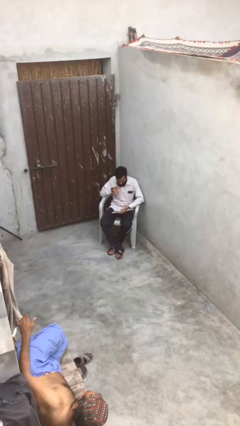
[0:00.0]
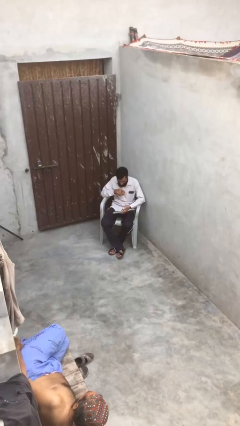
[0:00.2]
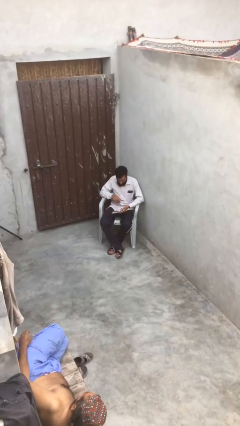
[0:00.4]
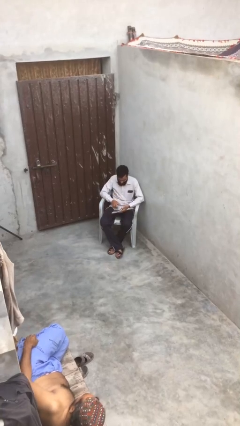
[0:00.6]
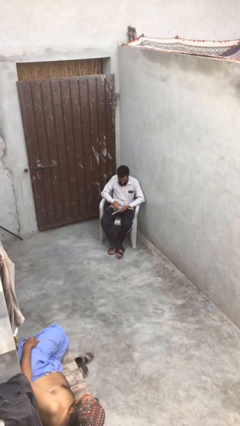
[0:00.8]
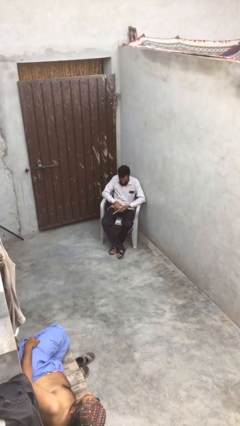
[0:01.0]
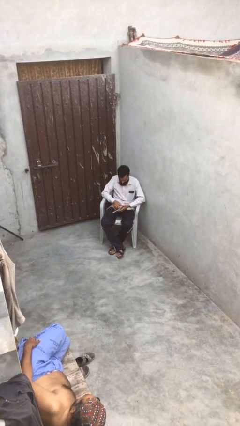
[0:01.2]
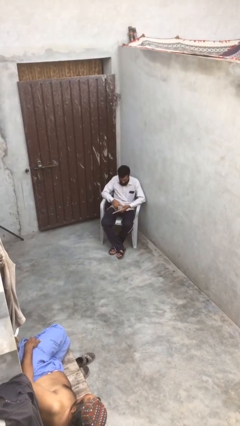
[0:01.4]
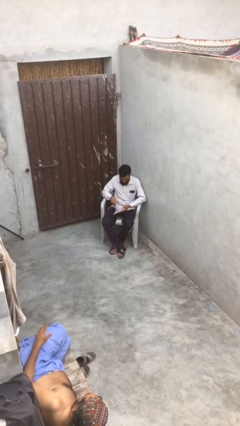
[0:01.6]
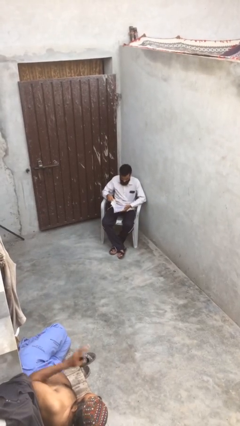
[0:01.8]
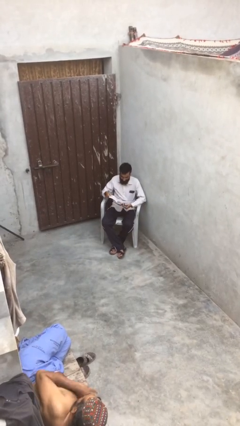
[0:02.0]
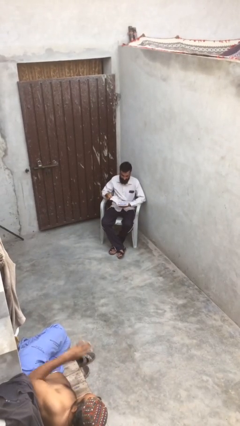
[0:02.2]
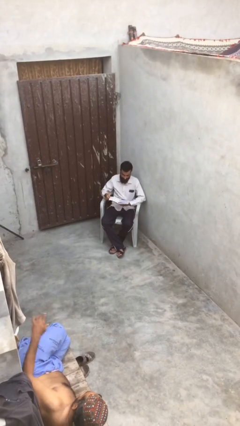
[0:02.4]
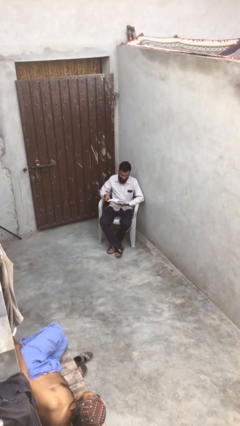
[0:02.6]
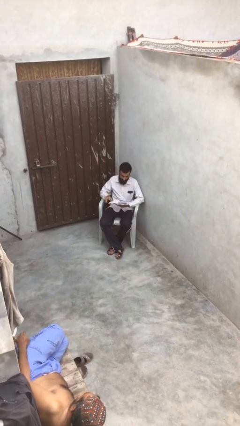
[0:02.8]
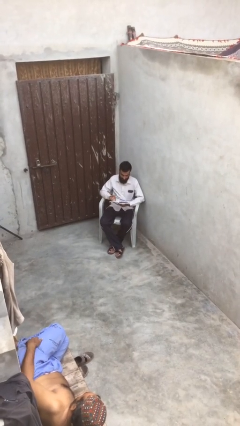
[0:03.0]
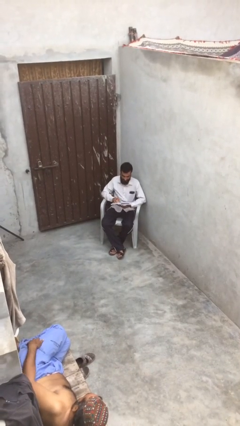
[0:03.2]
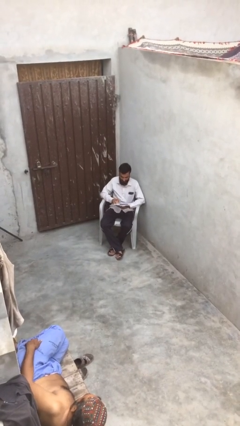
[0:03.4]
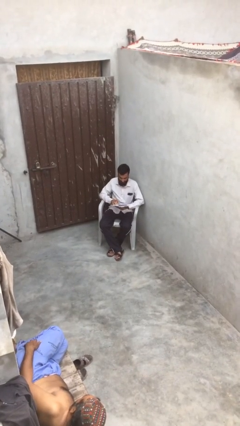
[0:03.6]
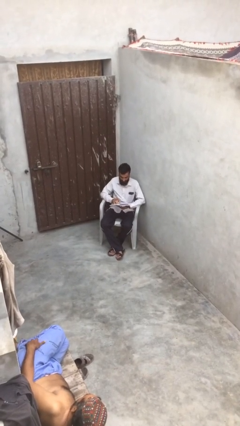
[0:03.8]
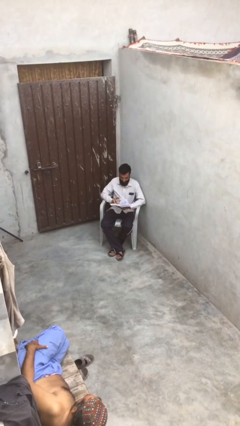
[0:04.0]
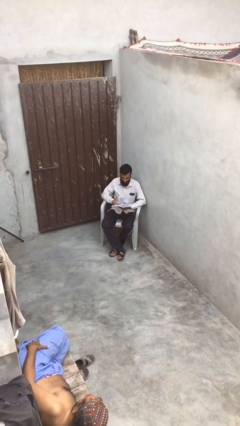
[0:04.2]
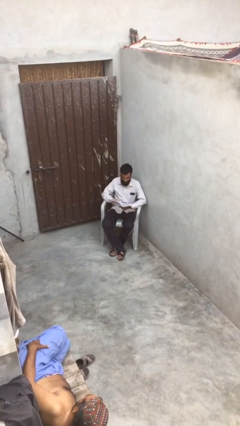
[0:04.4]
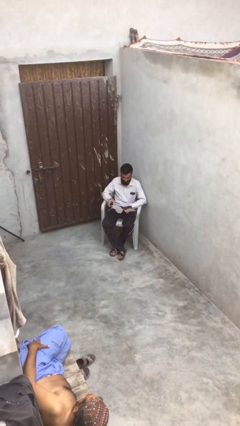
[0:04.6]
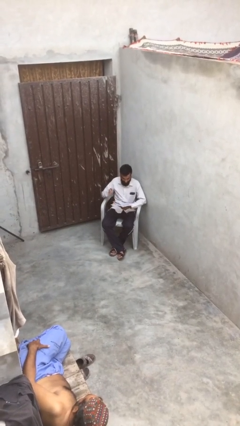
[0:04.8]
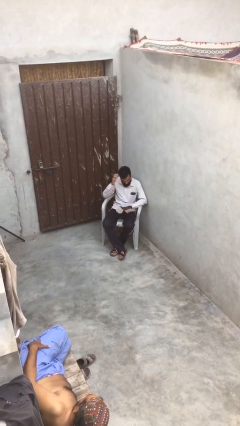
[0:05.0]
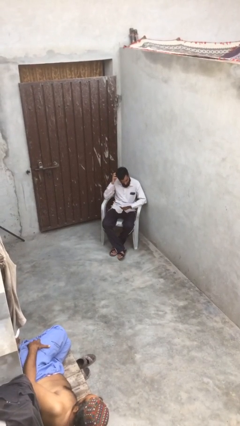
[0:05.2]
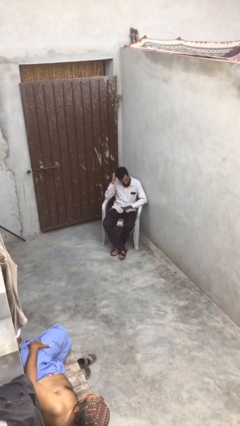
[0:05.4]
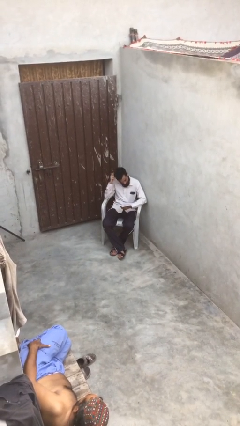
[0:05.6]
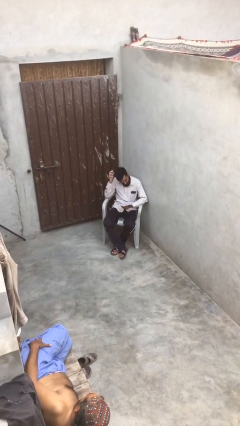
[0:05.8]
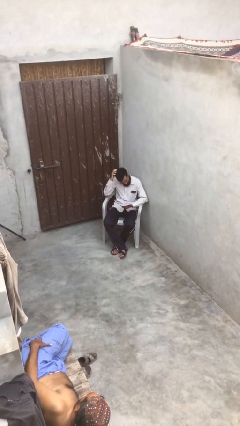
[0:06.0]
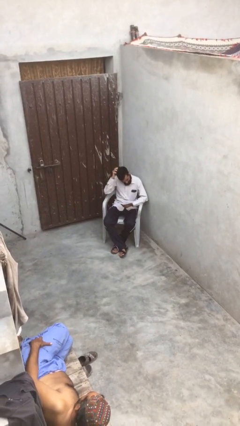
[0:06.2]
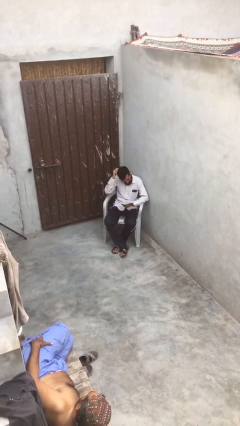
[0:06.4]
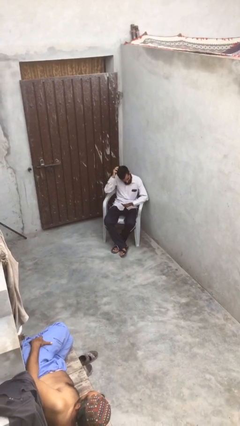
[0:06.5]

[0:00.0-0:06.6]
person reads document

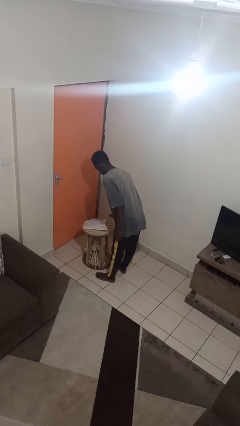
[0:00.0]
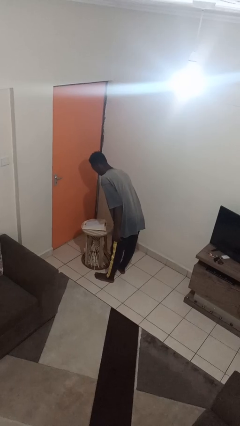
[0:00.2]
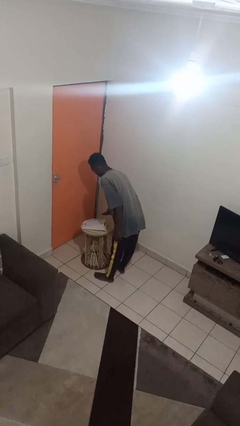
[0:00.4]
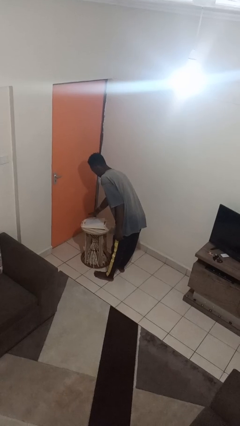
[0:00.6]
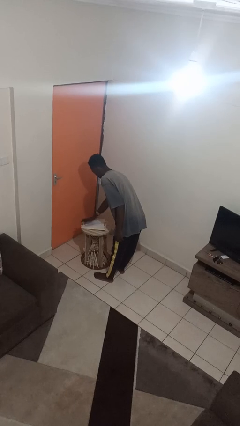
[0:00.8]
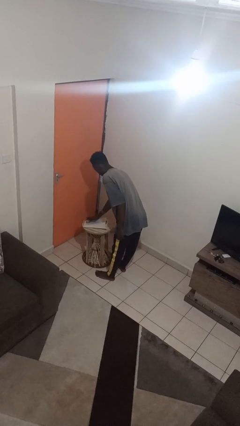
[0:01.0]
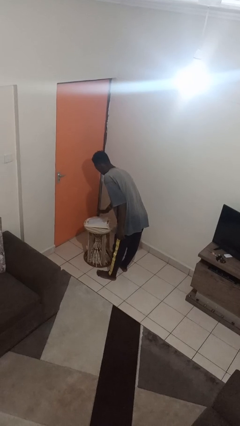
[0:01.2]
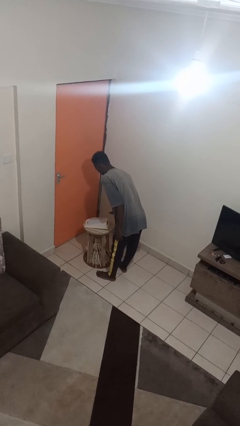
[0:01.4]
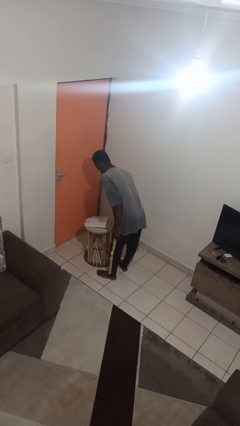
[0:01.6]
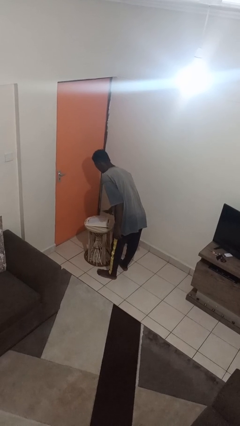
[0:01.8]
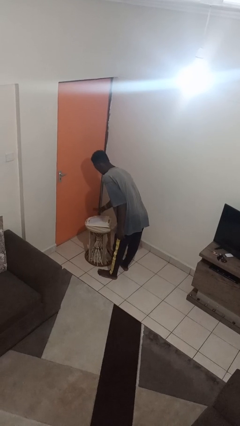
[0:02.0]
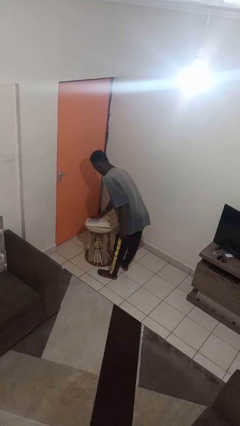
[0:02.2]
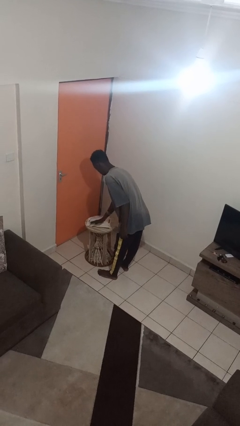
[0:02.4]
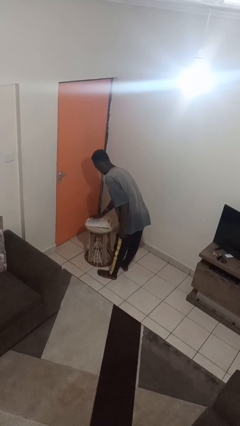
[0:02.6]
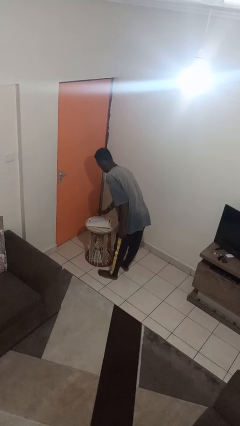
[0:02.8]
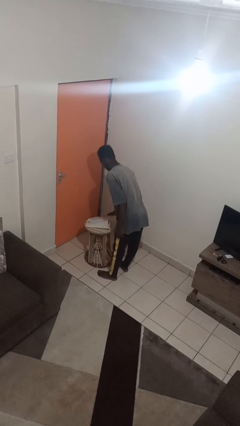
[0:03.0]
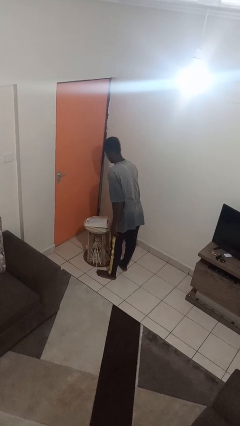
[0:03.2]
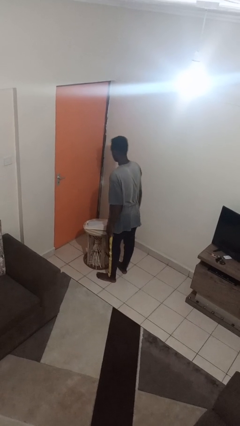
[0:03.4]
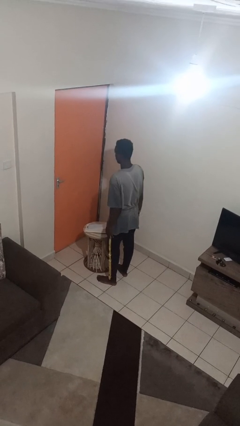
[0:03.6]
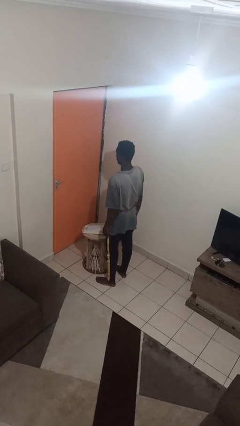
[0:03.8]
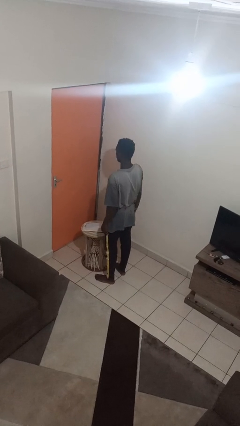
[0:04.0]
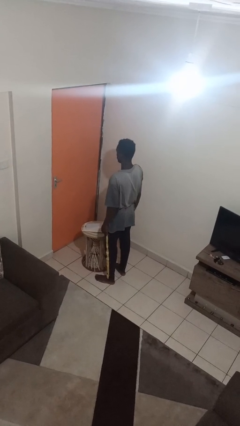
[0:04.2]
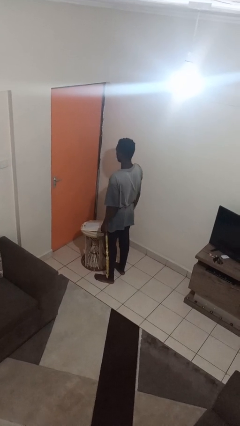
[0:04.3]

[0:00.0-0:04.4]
person waves hand over object

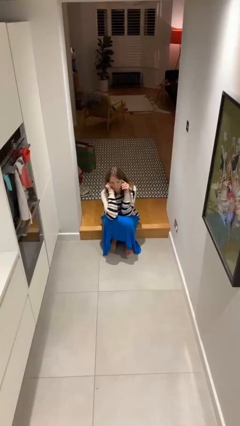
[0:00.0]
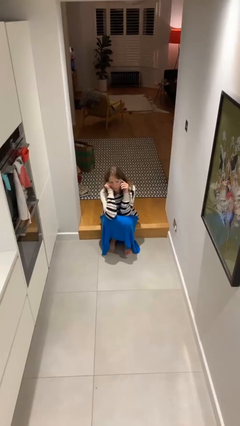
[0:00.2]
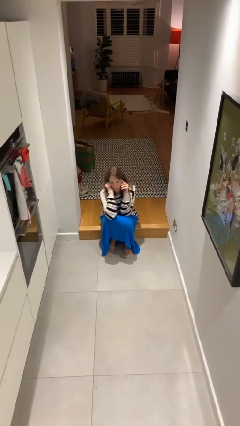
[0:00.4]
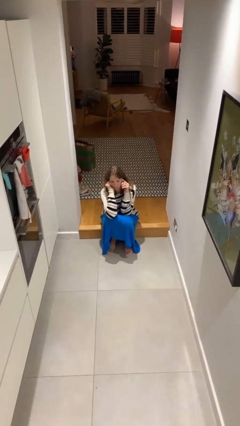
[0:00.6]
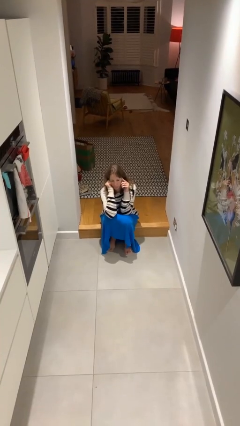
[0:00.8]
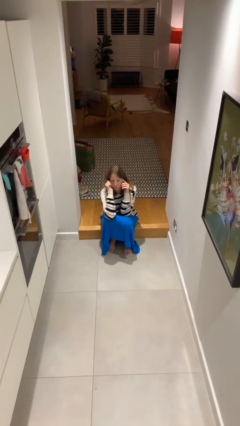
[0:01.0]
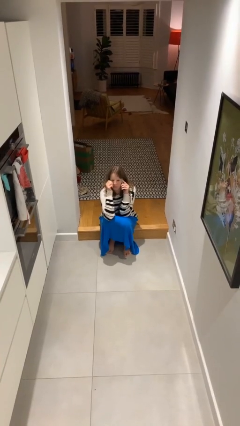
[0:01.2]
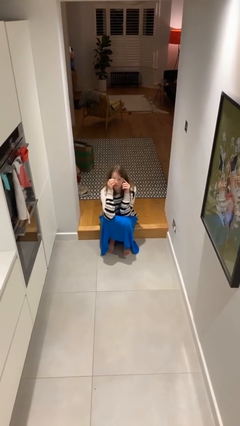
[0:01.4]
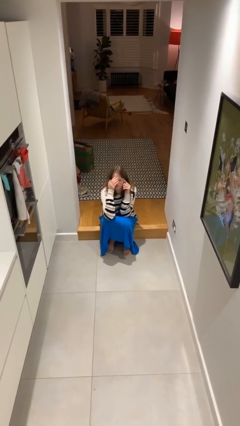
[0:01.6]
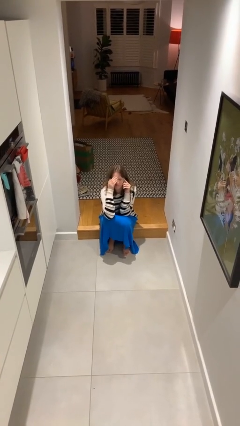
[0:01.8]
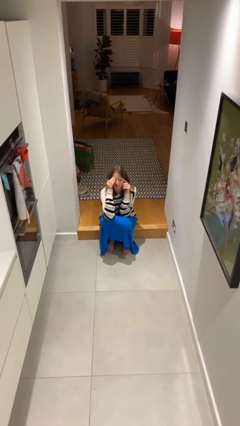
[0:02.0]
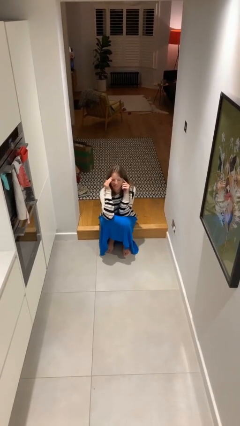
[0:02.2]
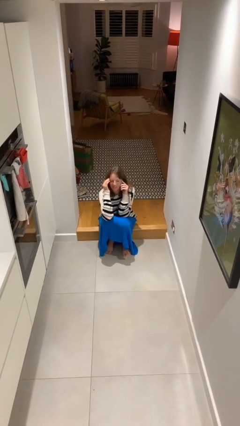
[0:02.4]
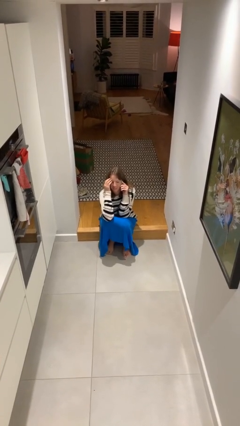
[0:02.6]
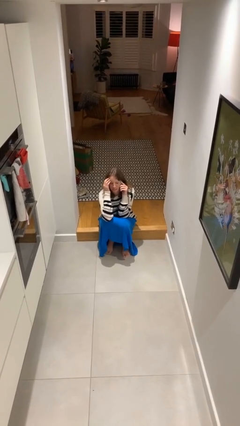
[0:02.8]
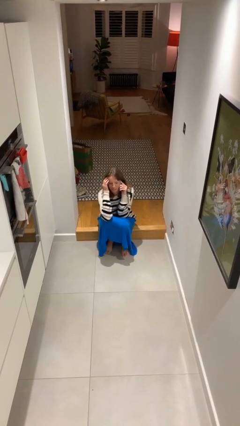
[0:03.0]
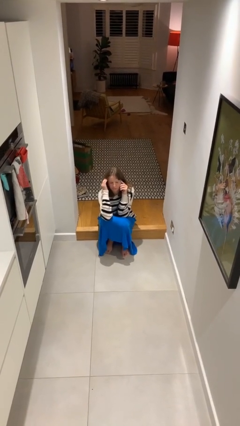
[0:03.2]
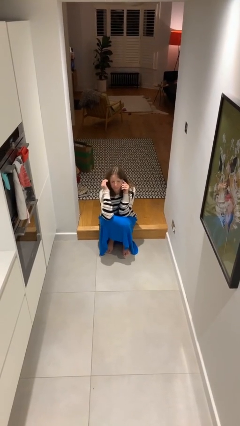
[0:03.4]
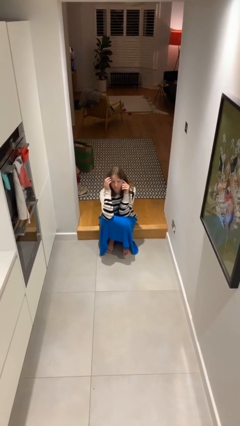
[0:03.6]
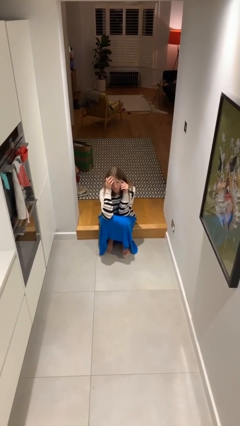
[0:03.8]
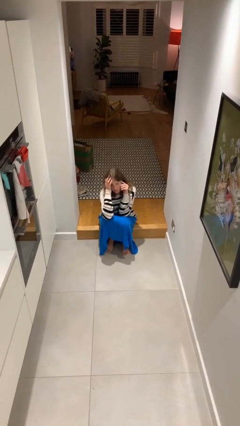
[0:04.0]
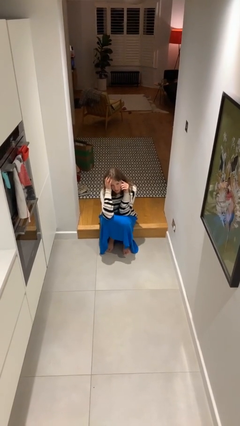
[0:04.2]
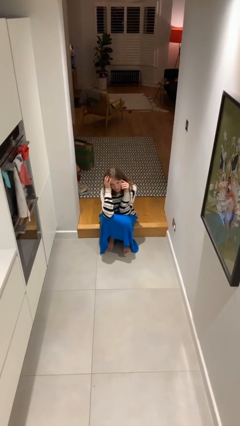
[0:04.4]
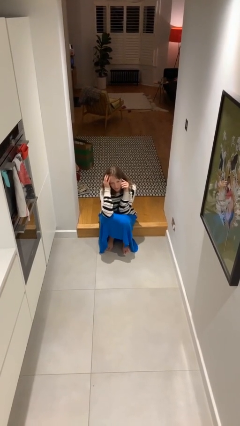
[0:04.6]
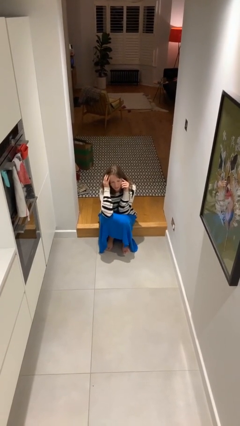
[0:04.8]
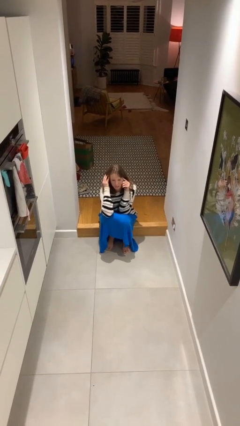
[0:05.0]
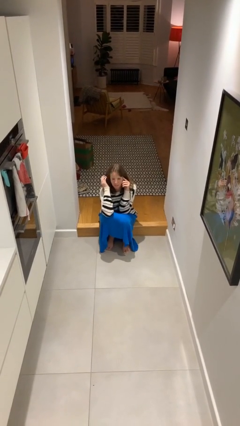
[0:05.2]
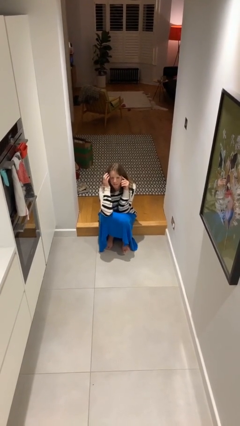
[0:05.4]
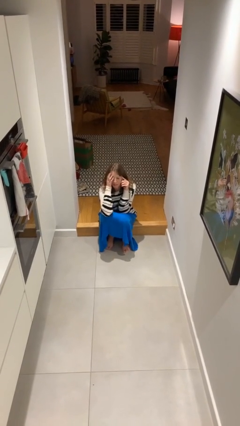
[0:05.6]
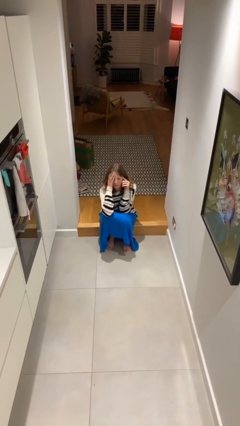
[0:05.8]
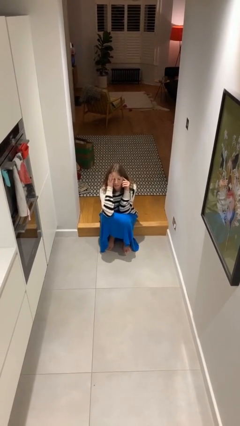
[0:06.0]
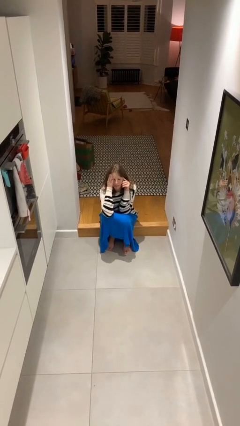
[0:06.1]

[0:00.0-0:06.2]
person talks on phone

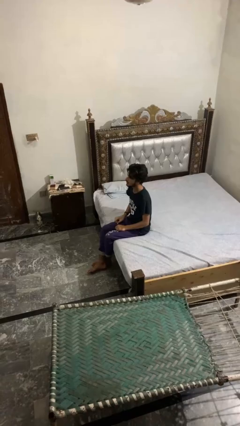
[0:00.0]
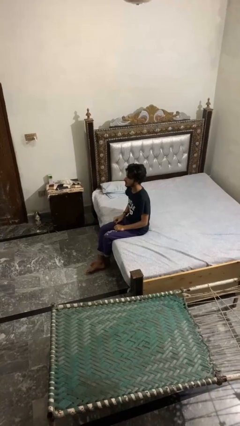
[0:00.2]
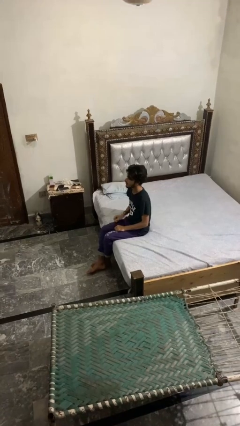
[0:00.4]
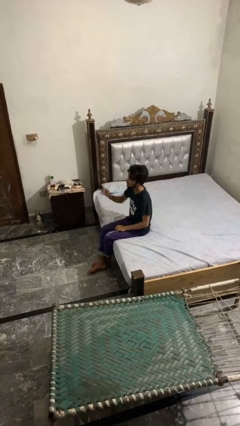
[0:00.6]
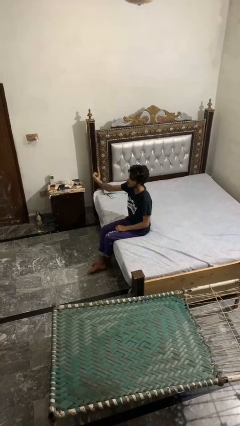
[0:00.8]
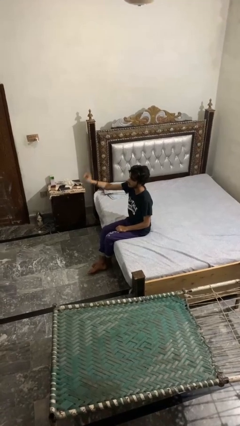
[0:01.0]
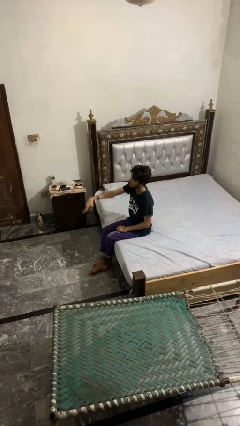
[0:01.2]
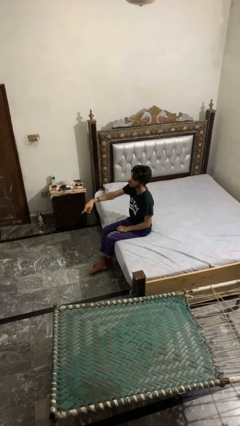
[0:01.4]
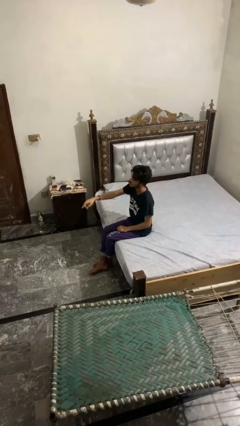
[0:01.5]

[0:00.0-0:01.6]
person gestures swipe down
